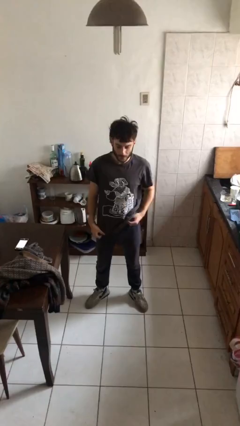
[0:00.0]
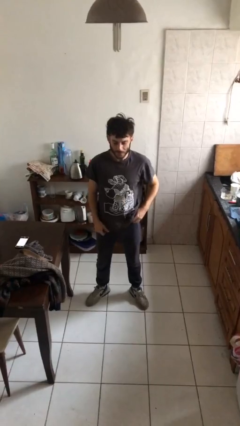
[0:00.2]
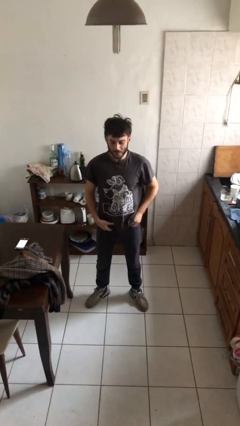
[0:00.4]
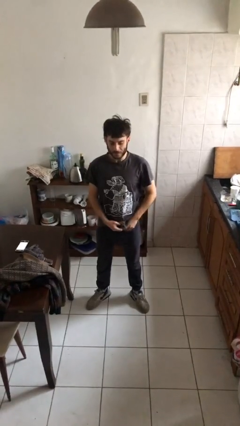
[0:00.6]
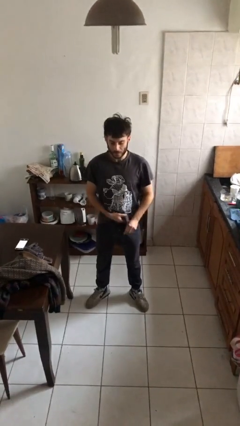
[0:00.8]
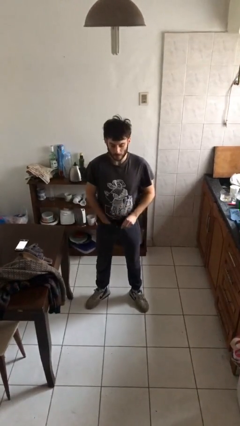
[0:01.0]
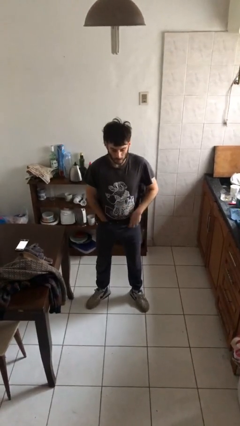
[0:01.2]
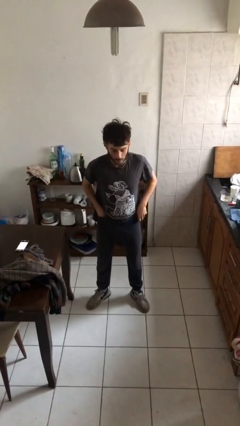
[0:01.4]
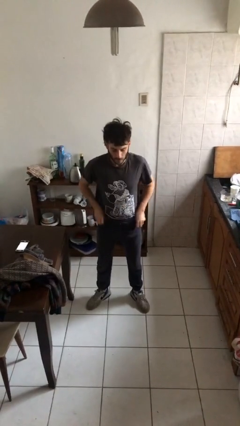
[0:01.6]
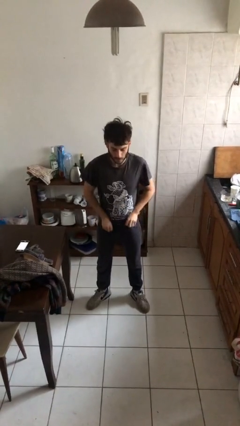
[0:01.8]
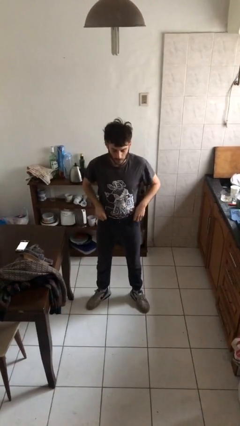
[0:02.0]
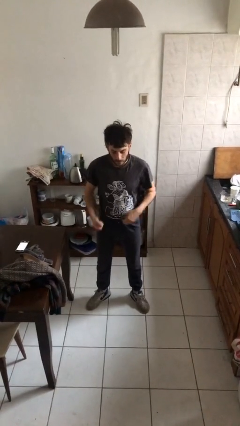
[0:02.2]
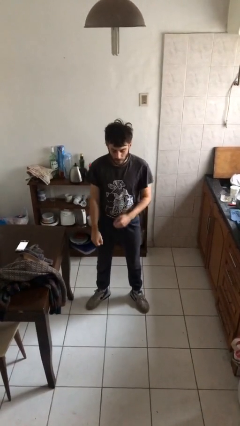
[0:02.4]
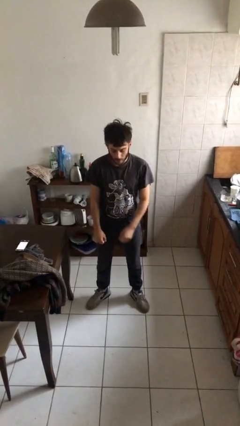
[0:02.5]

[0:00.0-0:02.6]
person tucks in shirt

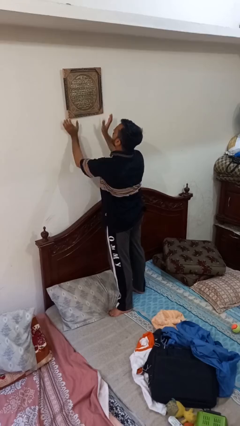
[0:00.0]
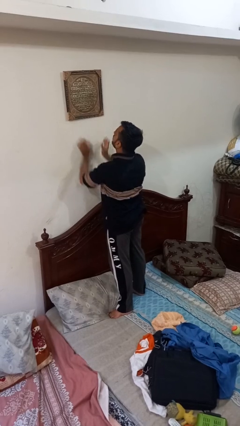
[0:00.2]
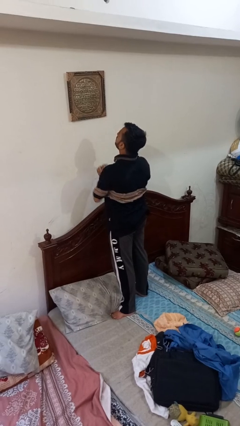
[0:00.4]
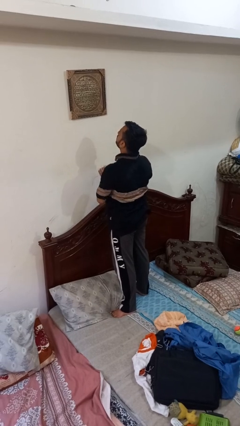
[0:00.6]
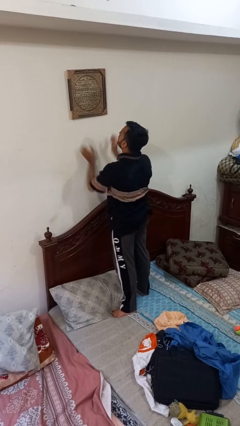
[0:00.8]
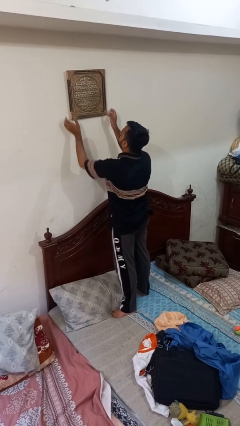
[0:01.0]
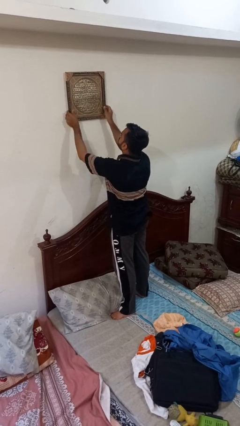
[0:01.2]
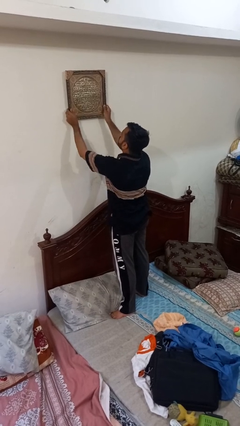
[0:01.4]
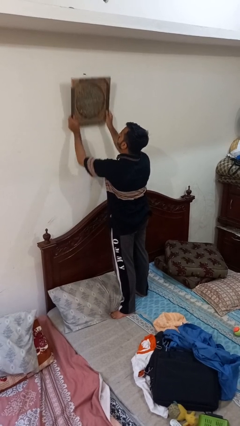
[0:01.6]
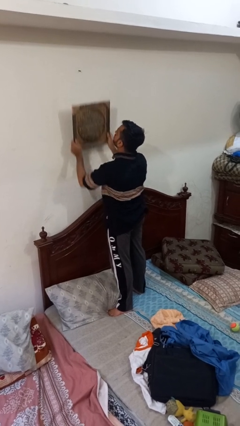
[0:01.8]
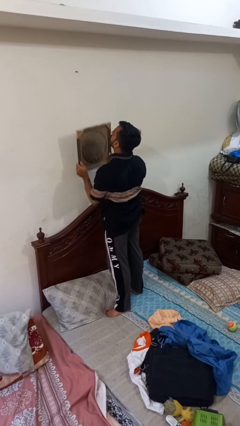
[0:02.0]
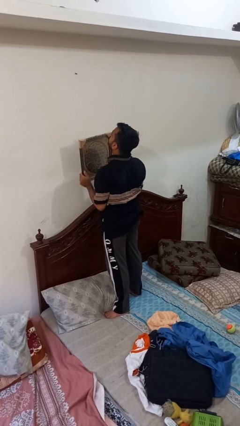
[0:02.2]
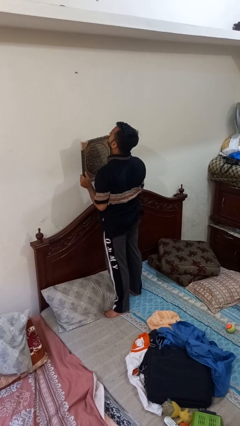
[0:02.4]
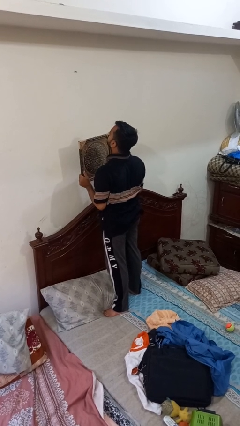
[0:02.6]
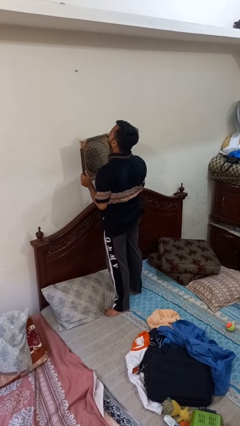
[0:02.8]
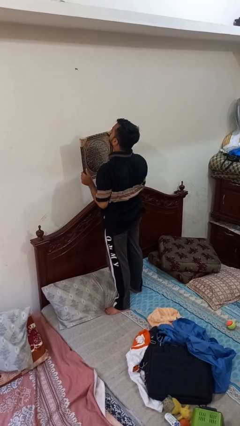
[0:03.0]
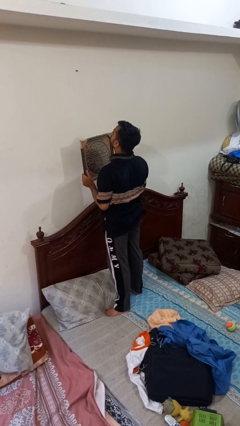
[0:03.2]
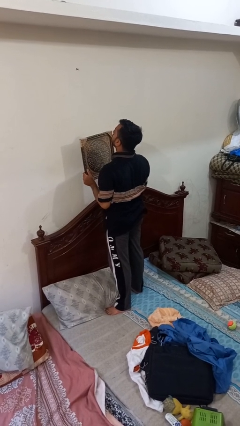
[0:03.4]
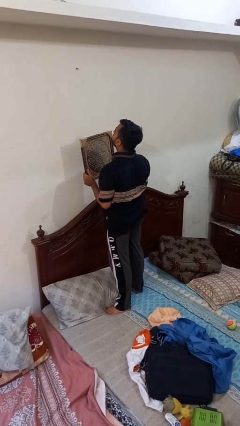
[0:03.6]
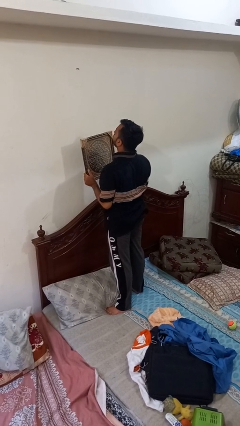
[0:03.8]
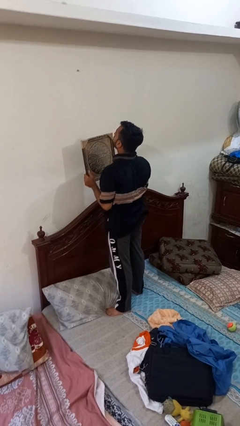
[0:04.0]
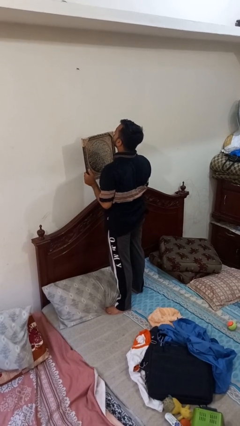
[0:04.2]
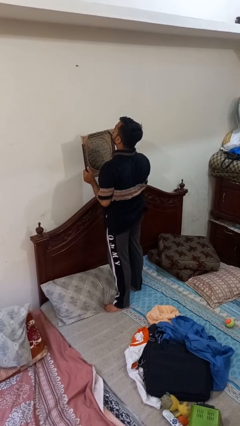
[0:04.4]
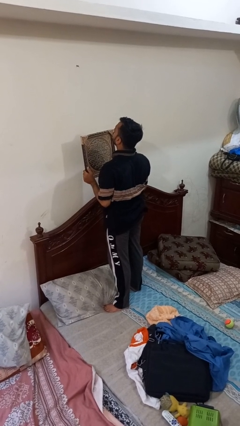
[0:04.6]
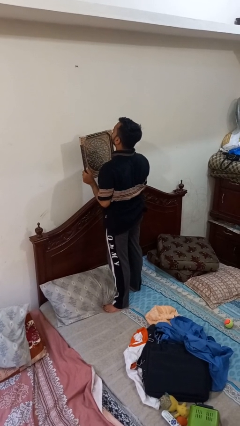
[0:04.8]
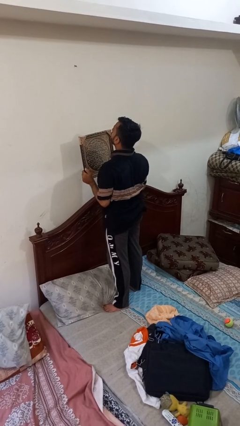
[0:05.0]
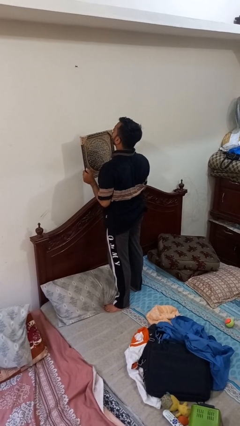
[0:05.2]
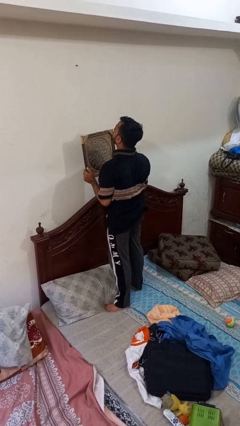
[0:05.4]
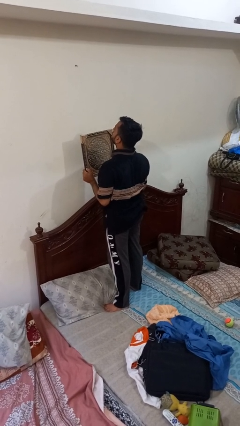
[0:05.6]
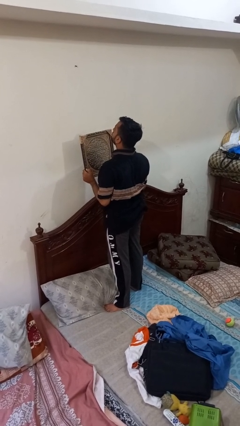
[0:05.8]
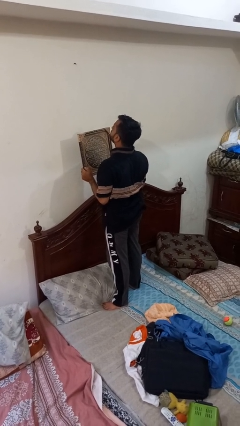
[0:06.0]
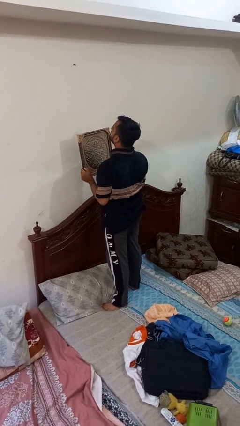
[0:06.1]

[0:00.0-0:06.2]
person takes down picture frame

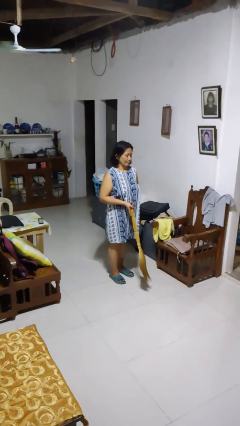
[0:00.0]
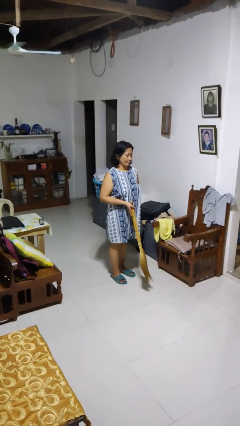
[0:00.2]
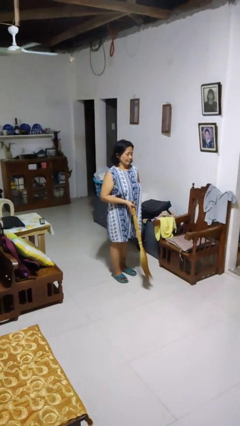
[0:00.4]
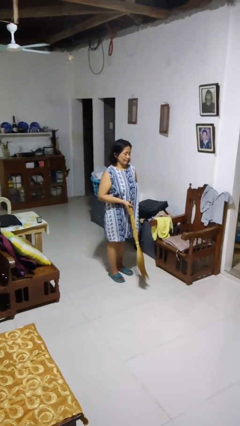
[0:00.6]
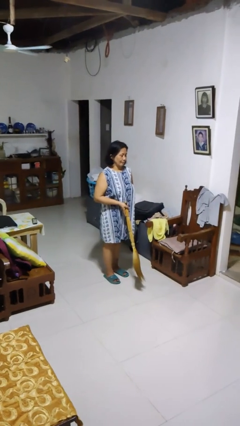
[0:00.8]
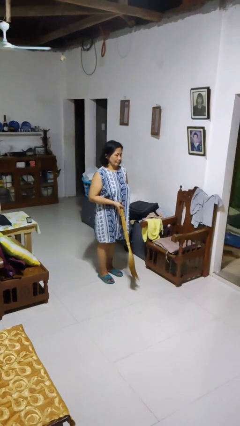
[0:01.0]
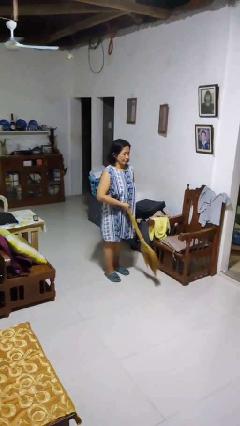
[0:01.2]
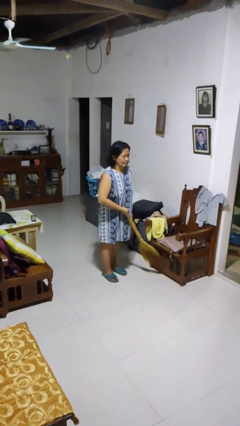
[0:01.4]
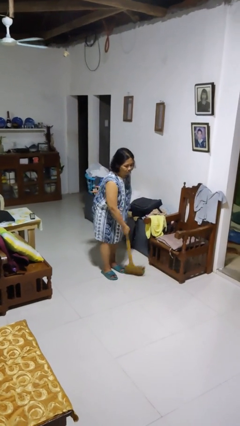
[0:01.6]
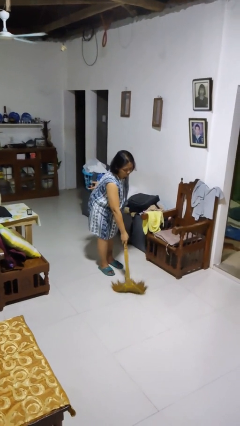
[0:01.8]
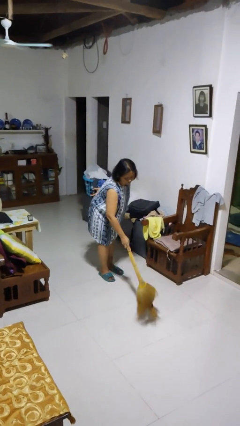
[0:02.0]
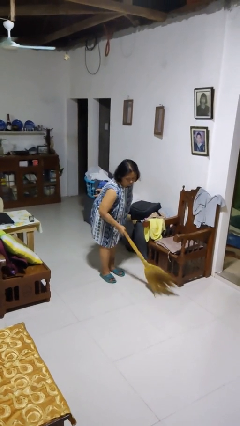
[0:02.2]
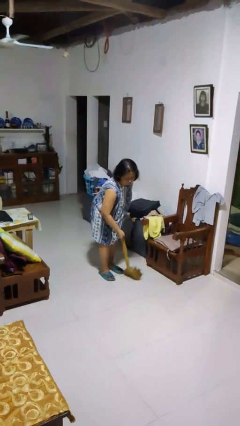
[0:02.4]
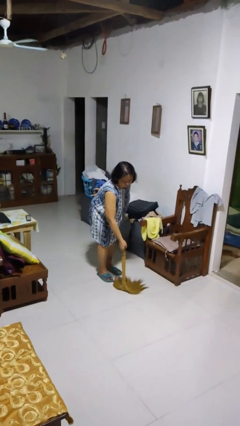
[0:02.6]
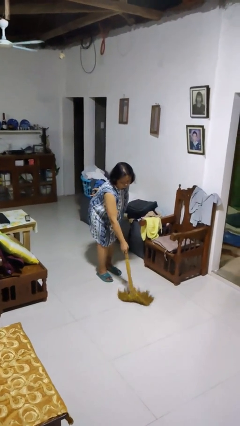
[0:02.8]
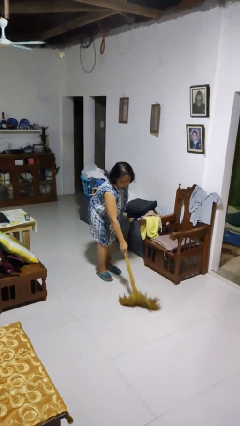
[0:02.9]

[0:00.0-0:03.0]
person sweeps floor

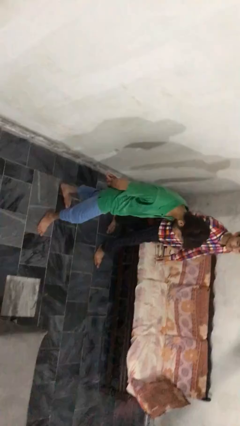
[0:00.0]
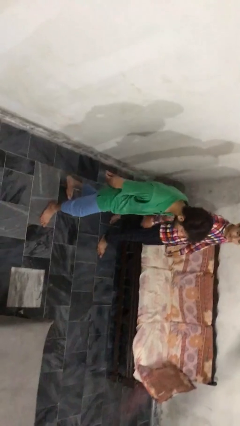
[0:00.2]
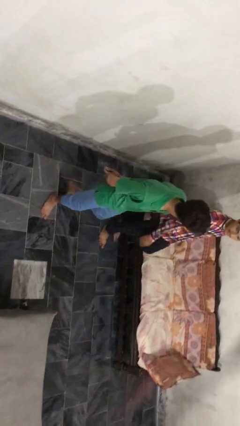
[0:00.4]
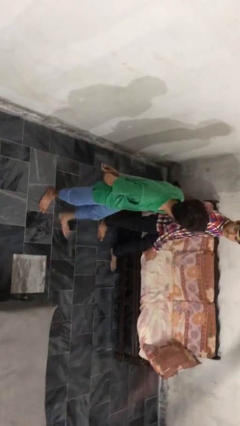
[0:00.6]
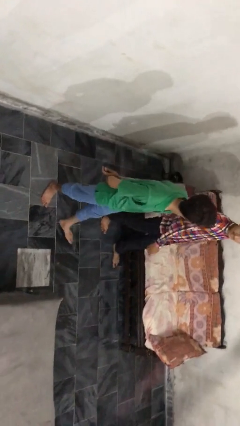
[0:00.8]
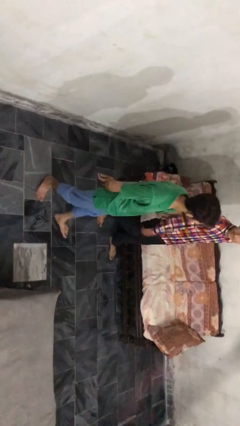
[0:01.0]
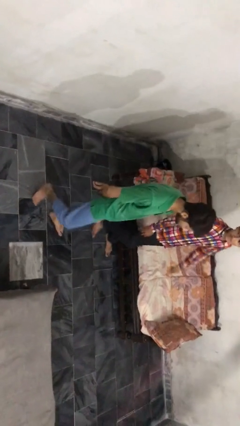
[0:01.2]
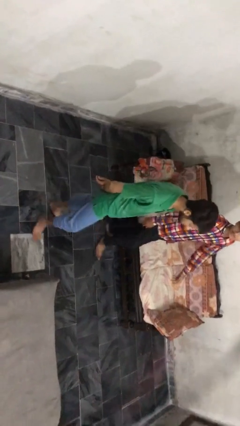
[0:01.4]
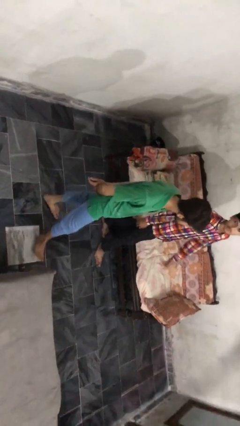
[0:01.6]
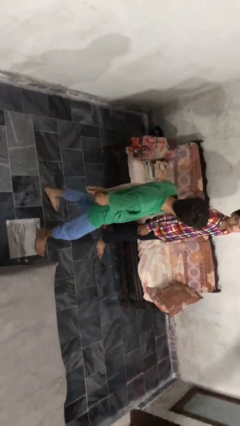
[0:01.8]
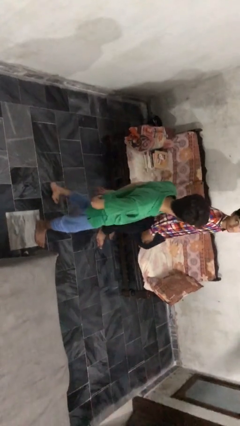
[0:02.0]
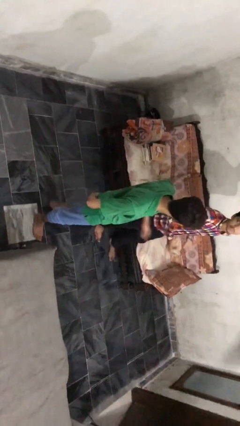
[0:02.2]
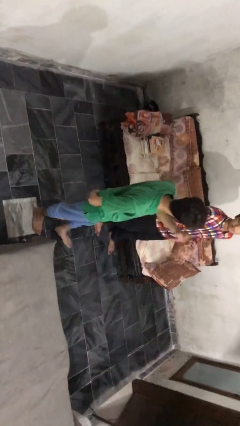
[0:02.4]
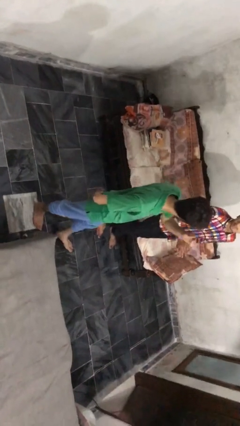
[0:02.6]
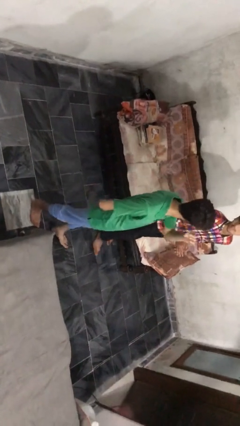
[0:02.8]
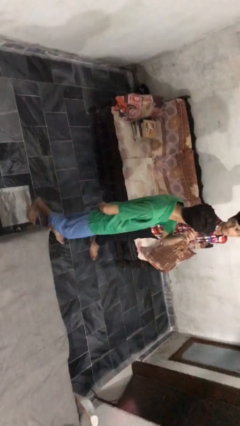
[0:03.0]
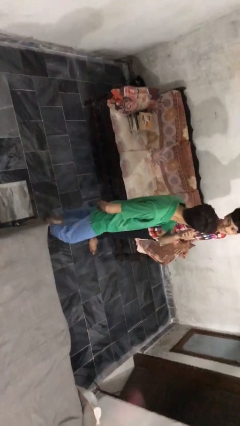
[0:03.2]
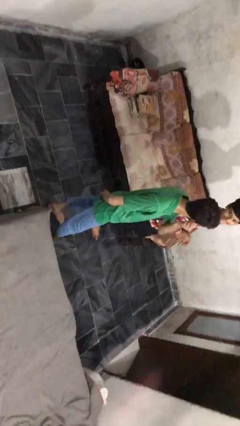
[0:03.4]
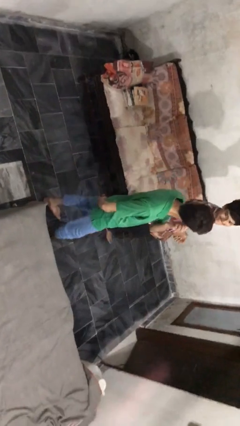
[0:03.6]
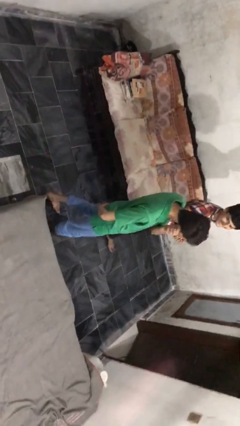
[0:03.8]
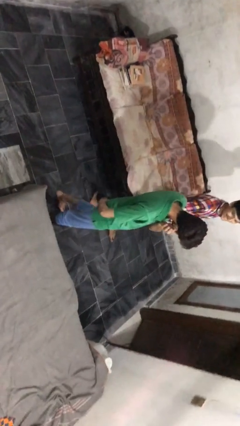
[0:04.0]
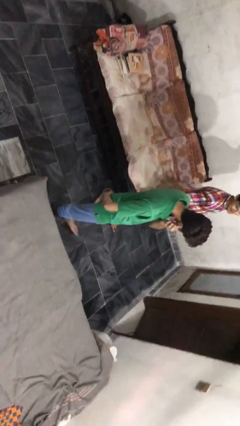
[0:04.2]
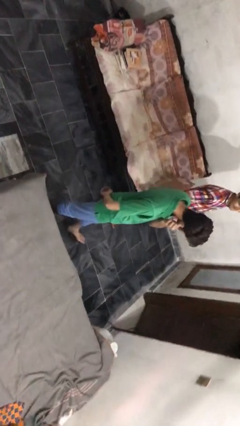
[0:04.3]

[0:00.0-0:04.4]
person talks to person

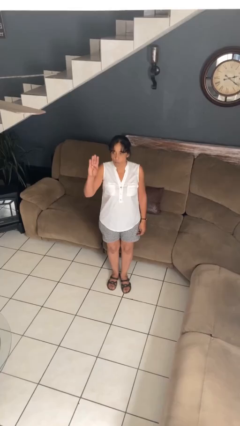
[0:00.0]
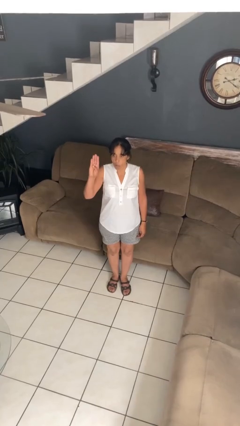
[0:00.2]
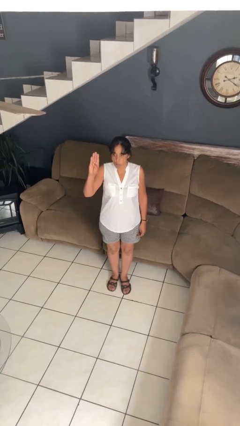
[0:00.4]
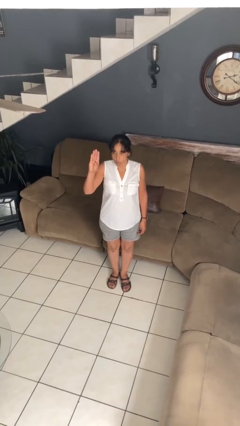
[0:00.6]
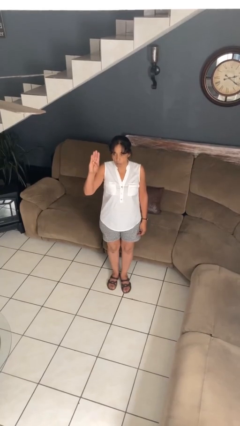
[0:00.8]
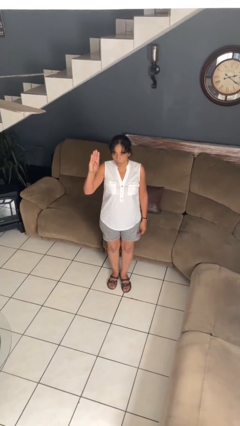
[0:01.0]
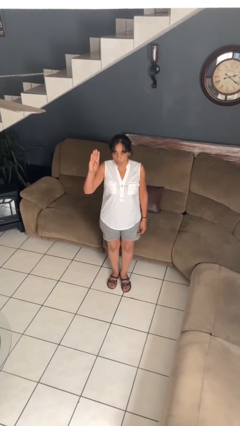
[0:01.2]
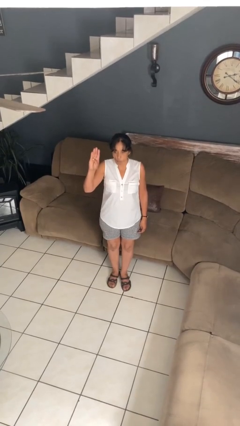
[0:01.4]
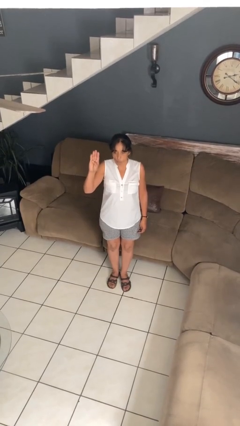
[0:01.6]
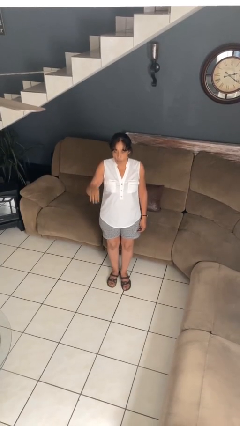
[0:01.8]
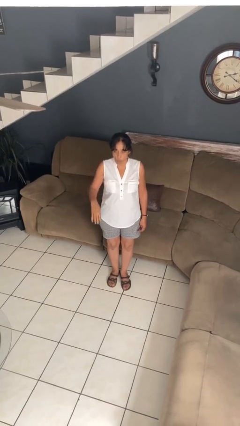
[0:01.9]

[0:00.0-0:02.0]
person gestures number four
